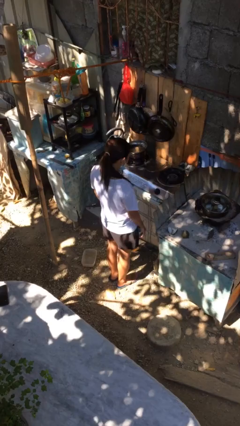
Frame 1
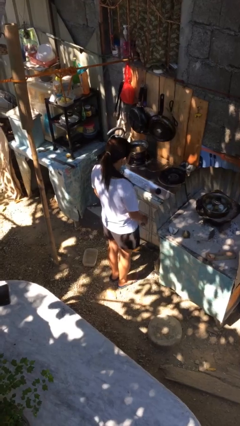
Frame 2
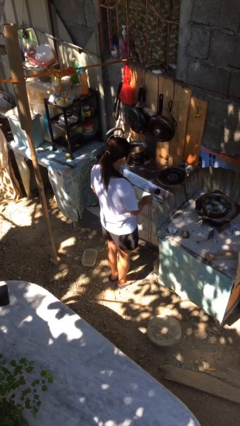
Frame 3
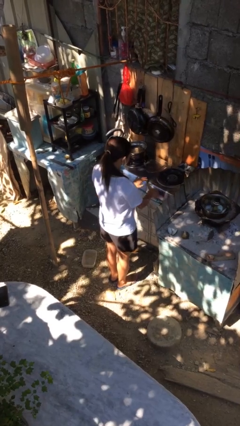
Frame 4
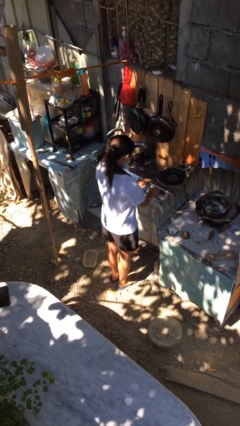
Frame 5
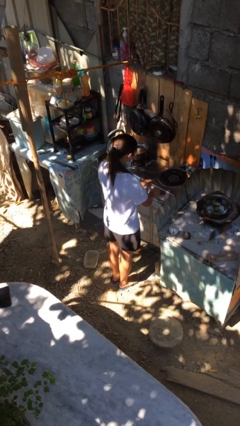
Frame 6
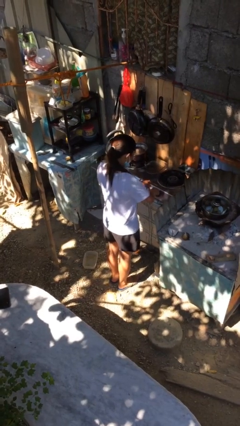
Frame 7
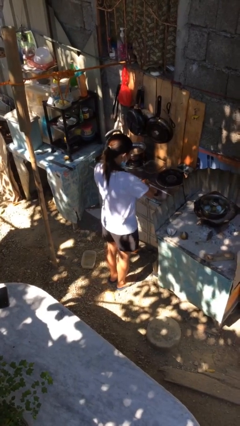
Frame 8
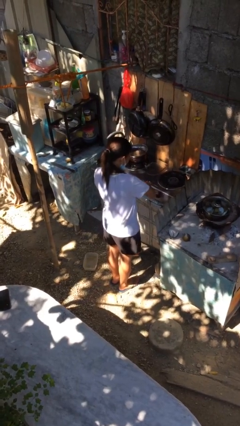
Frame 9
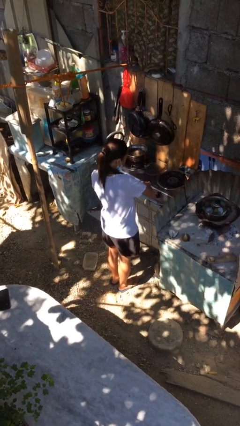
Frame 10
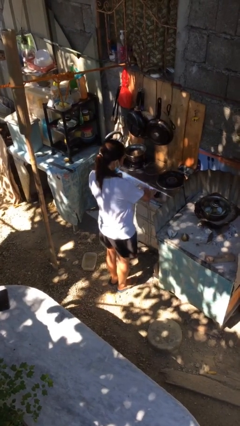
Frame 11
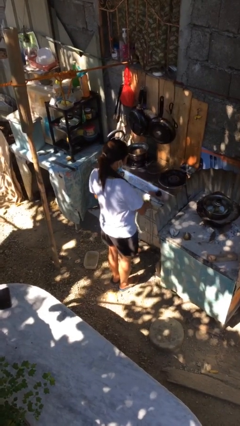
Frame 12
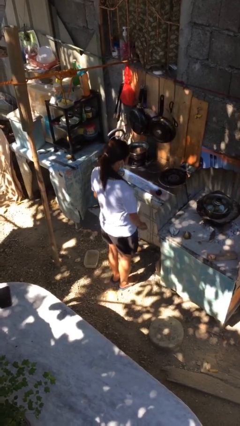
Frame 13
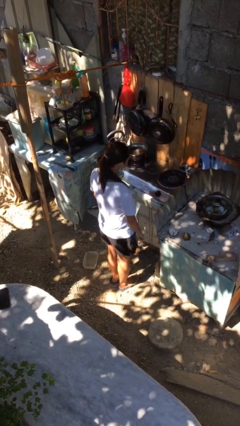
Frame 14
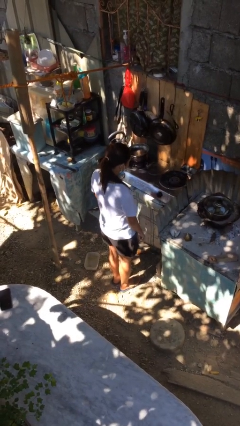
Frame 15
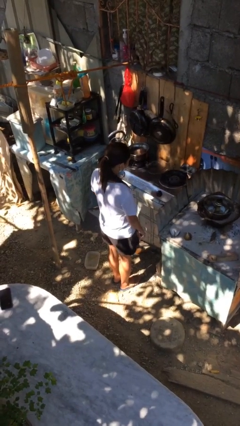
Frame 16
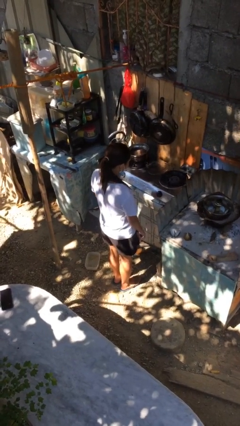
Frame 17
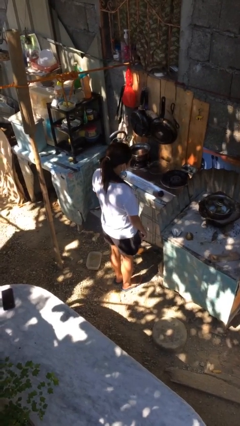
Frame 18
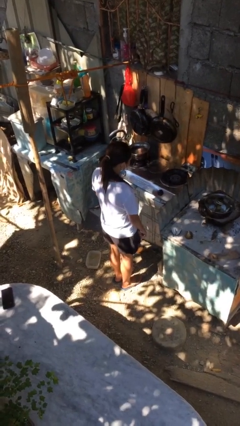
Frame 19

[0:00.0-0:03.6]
person turns on stovetop

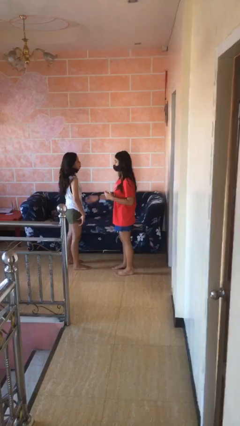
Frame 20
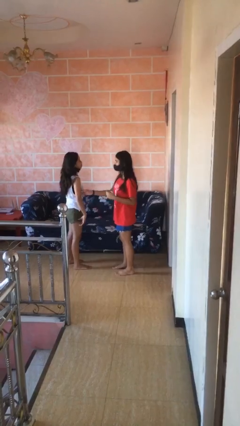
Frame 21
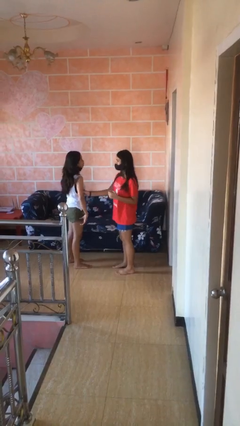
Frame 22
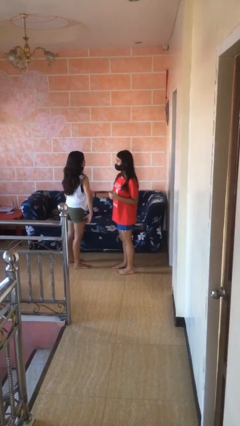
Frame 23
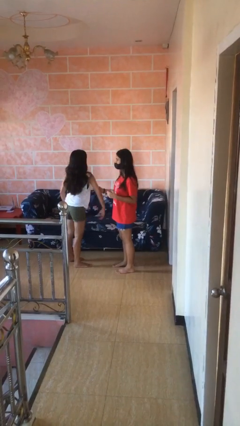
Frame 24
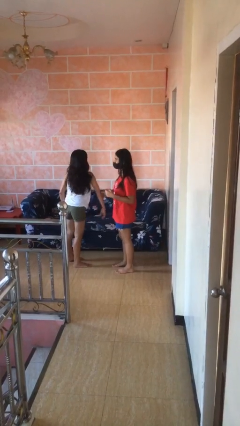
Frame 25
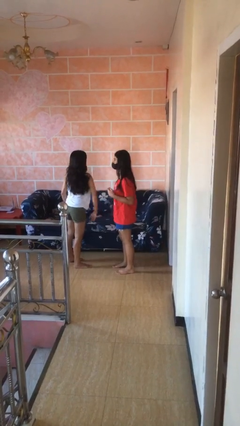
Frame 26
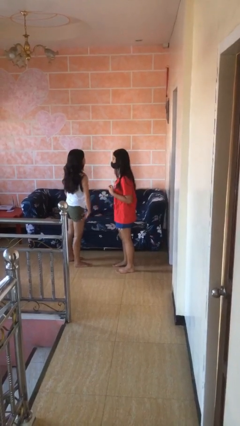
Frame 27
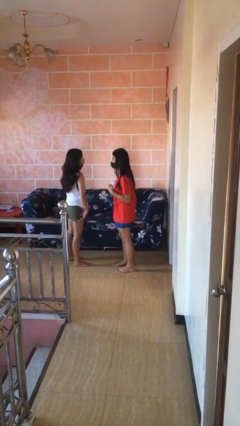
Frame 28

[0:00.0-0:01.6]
person grabs person by bicep

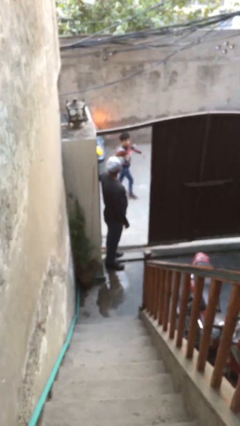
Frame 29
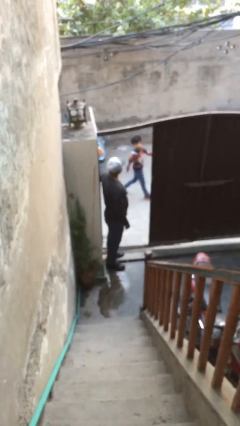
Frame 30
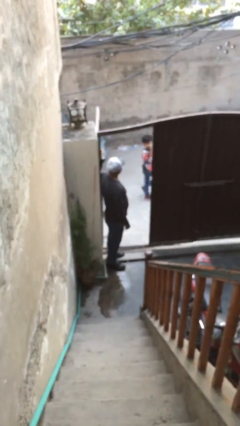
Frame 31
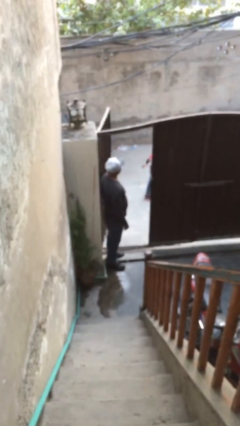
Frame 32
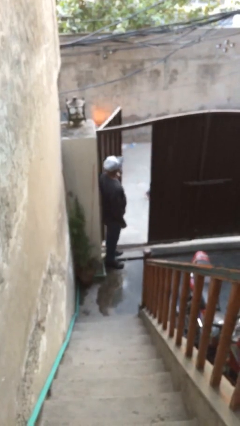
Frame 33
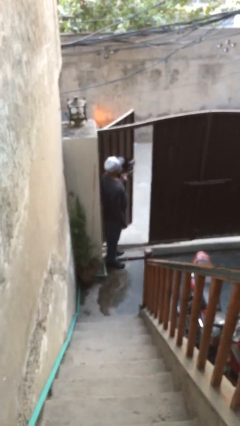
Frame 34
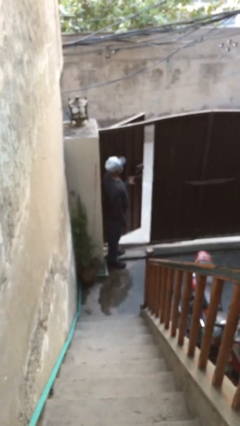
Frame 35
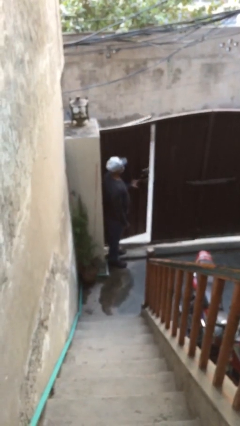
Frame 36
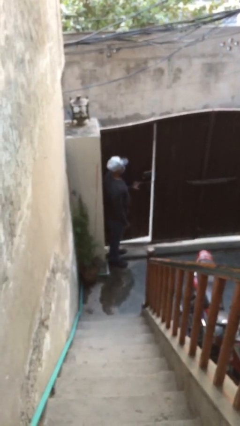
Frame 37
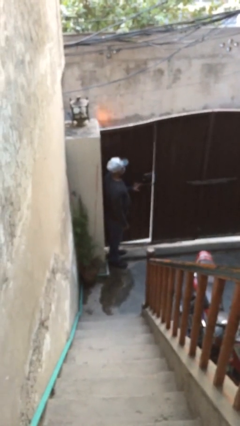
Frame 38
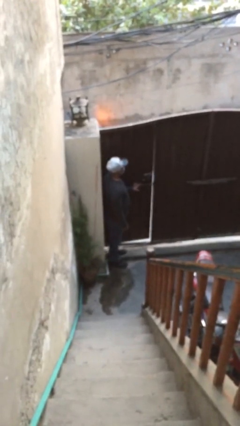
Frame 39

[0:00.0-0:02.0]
person closes facility door

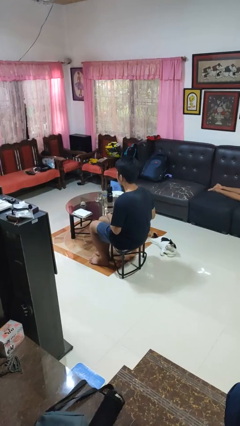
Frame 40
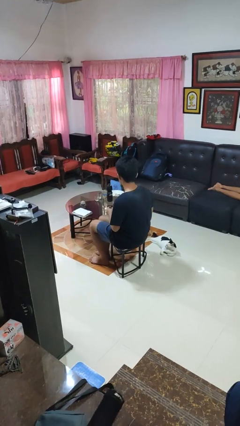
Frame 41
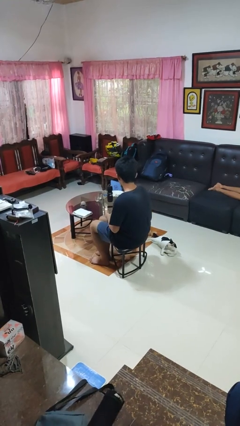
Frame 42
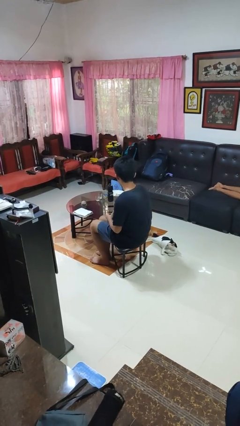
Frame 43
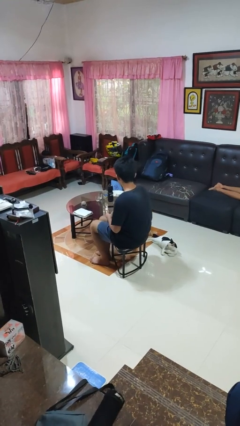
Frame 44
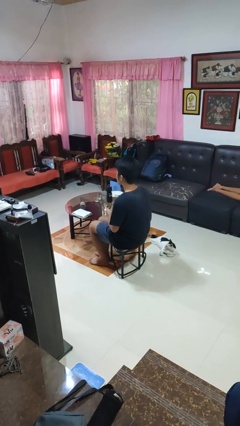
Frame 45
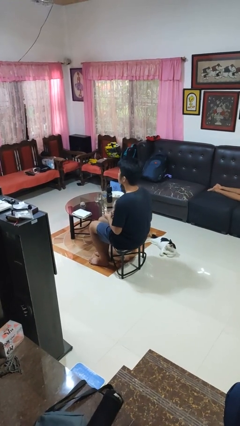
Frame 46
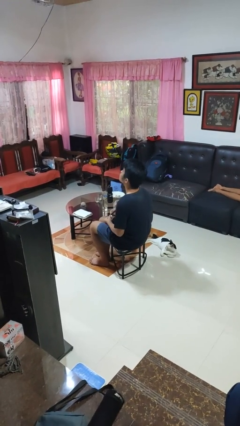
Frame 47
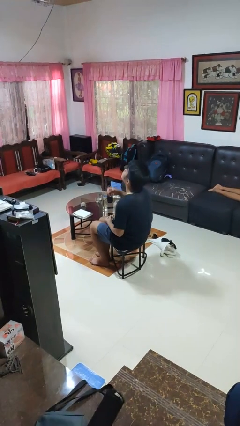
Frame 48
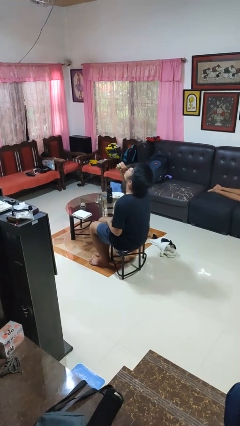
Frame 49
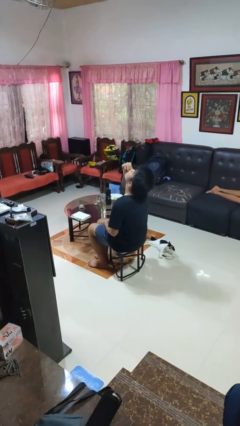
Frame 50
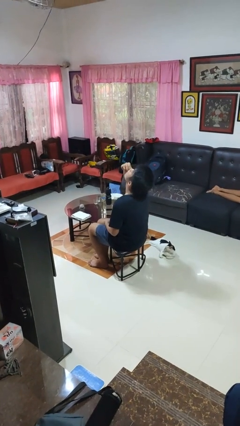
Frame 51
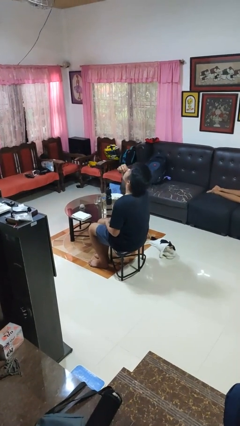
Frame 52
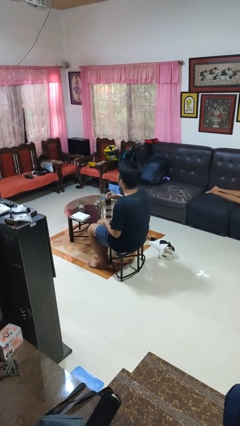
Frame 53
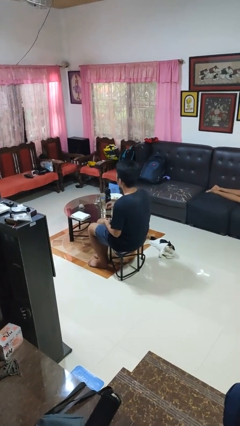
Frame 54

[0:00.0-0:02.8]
person takes medicine pills

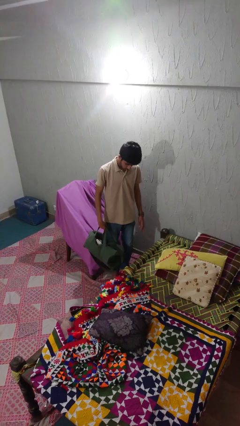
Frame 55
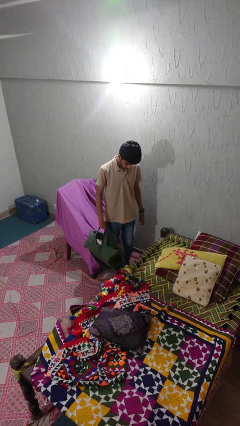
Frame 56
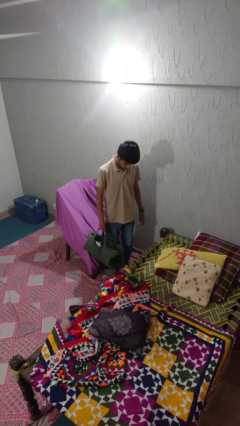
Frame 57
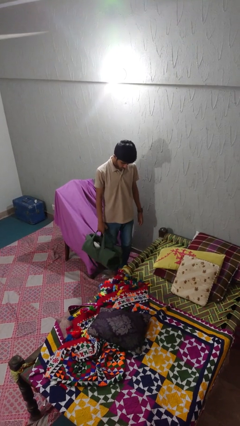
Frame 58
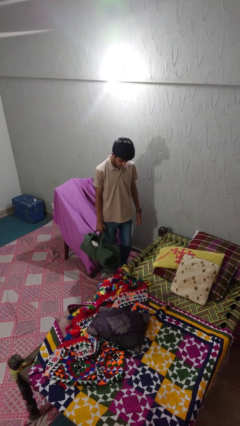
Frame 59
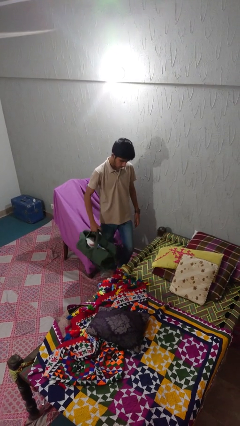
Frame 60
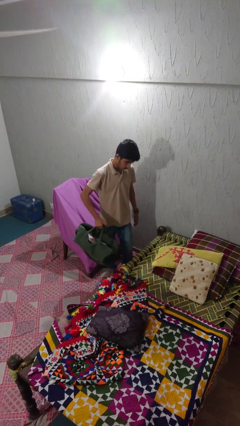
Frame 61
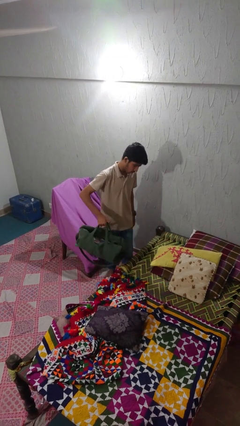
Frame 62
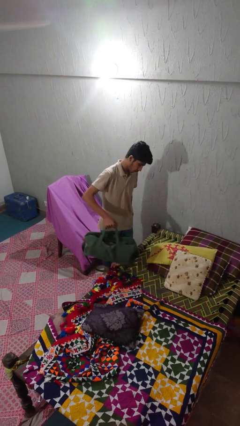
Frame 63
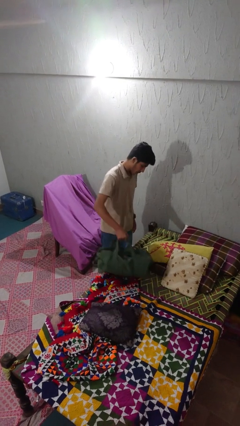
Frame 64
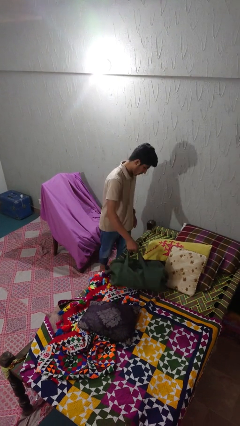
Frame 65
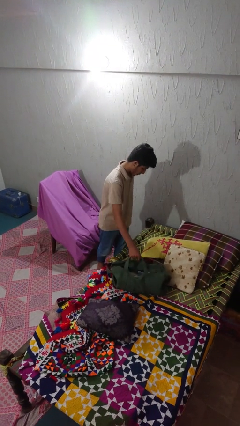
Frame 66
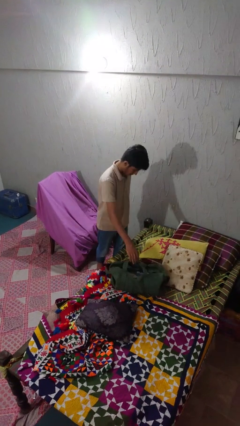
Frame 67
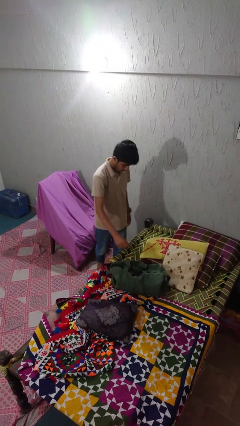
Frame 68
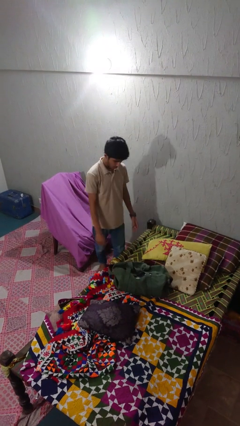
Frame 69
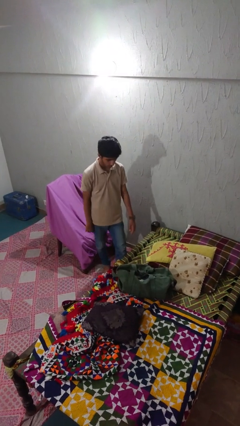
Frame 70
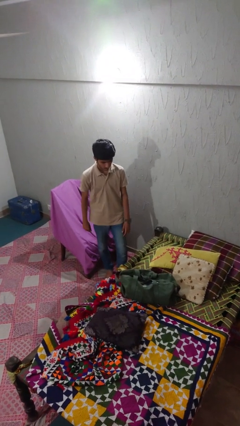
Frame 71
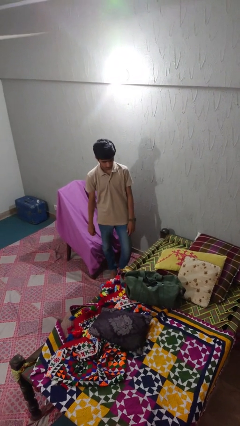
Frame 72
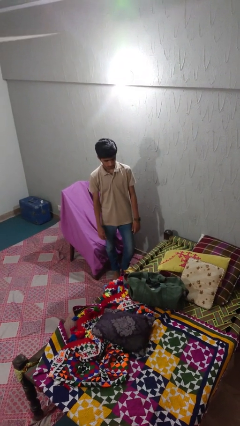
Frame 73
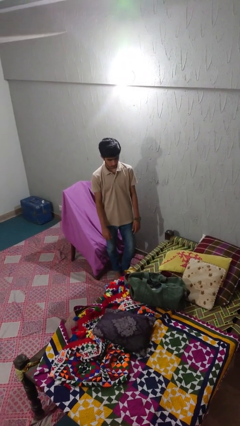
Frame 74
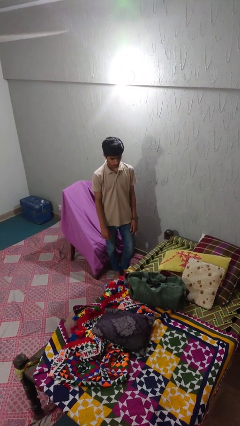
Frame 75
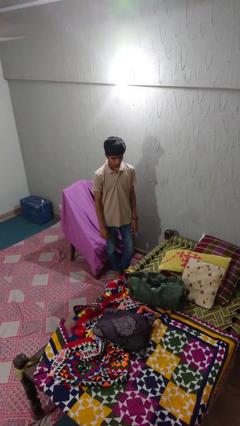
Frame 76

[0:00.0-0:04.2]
person puts down object on bed

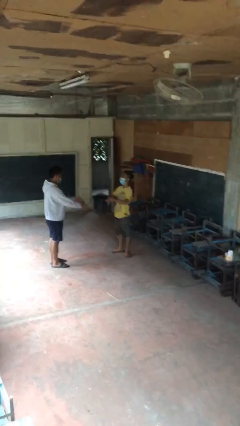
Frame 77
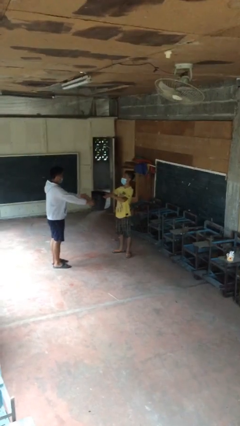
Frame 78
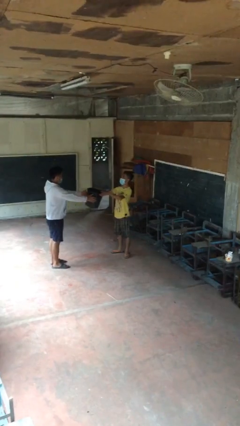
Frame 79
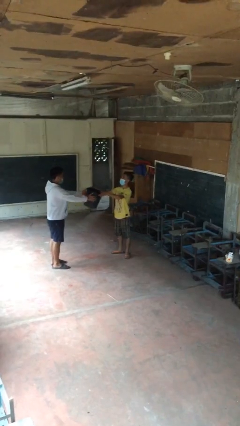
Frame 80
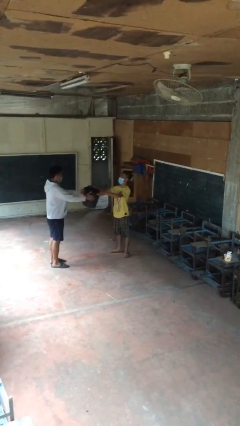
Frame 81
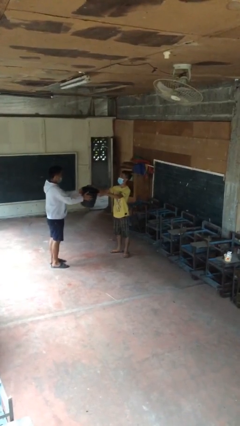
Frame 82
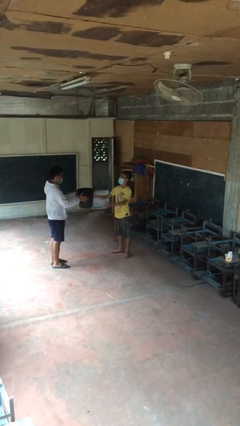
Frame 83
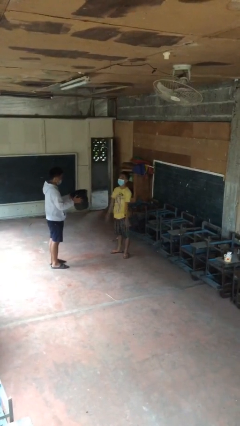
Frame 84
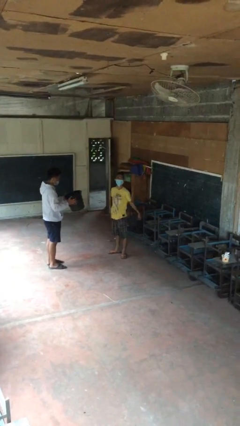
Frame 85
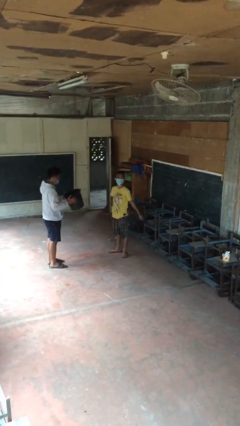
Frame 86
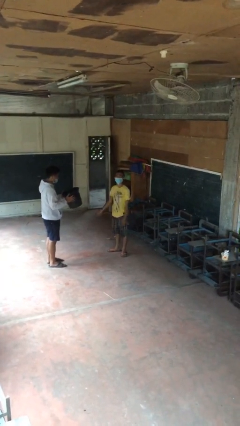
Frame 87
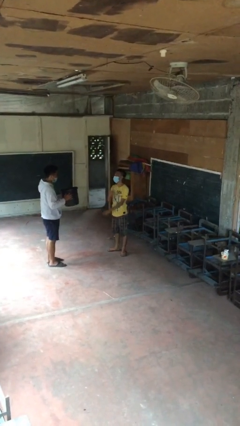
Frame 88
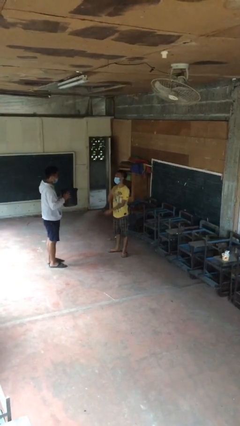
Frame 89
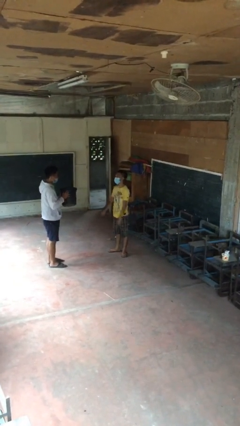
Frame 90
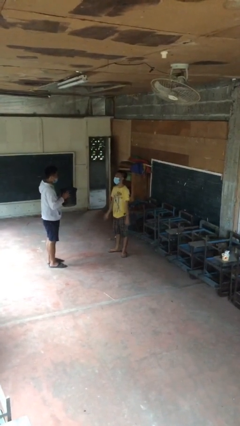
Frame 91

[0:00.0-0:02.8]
person transfers object to person

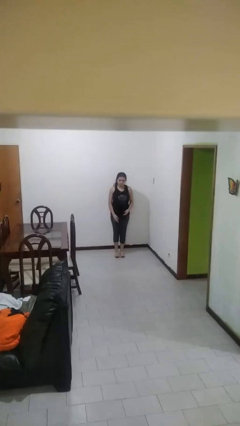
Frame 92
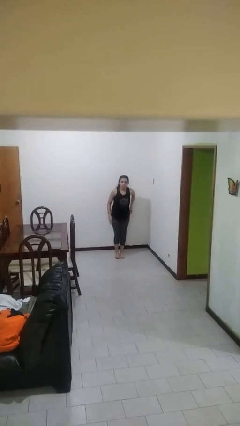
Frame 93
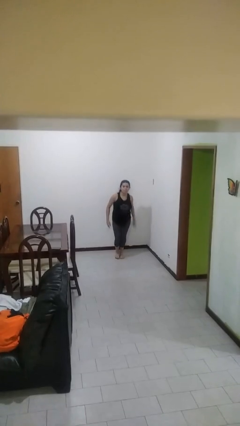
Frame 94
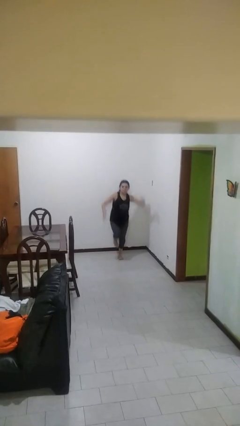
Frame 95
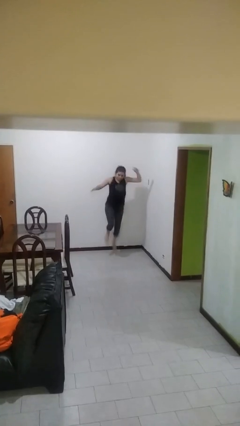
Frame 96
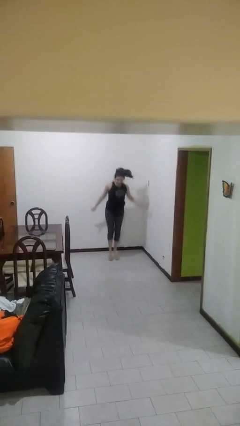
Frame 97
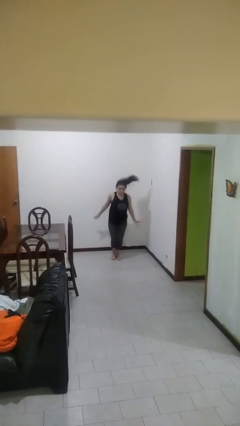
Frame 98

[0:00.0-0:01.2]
person jumps
